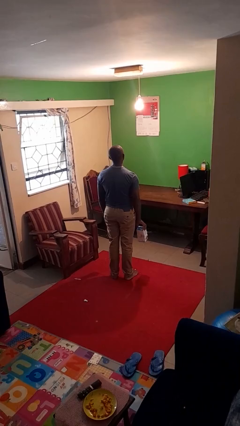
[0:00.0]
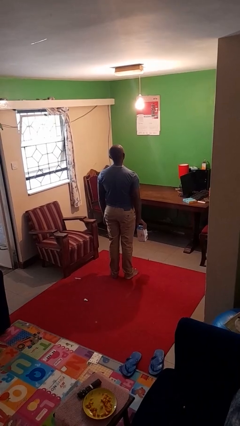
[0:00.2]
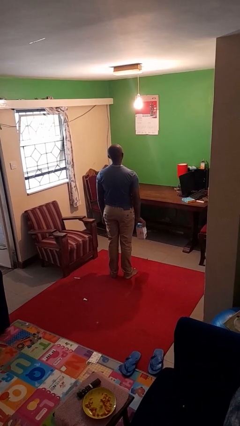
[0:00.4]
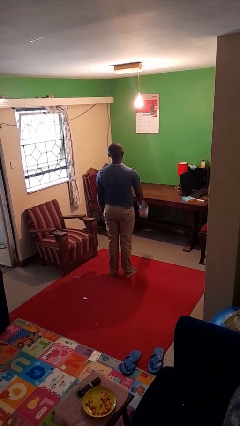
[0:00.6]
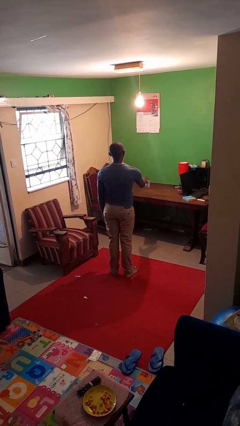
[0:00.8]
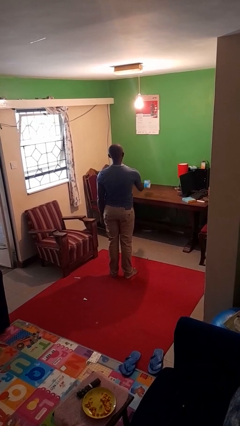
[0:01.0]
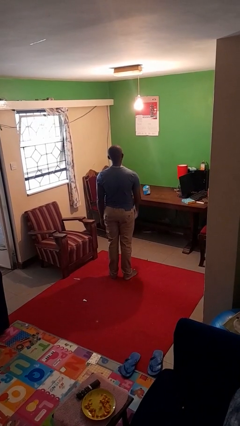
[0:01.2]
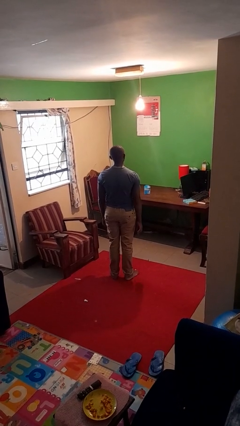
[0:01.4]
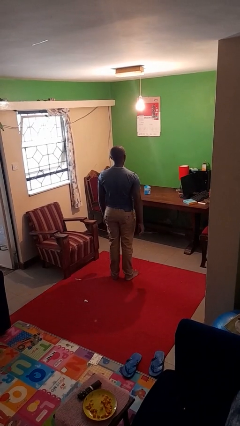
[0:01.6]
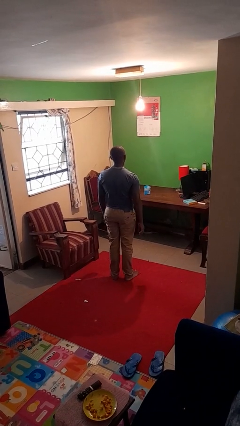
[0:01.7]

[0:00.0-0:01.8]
person throws object on table

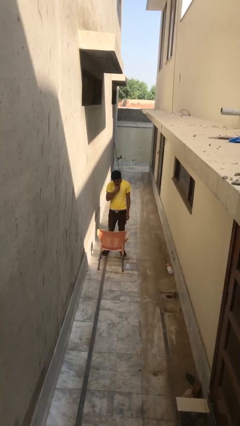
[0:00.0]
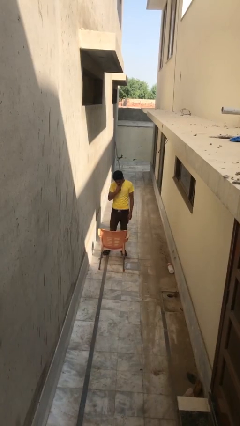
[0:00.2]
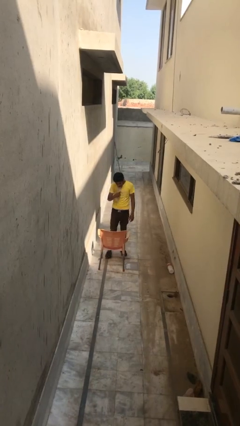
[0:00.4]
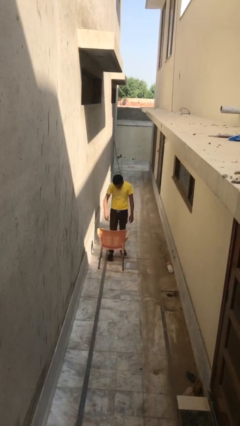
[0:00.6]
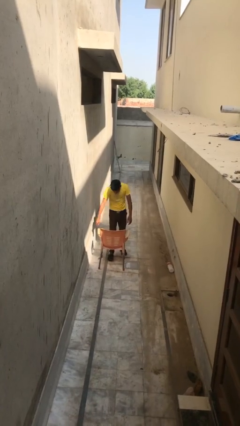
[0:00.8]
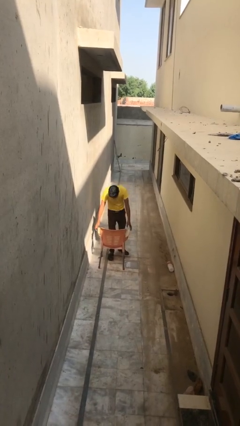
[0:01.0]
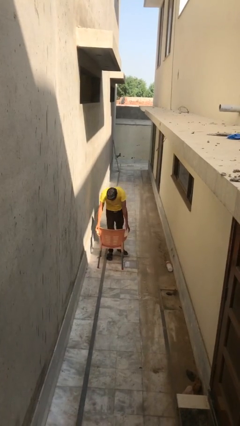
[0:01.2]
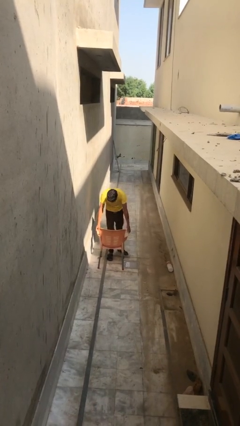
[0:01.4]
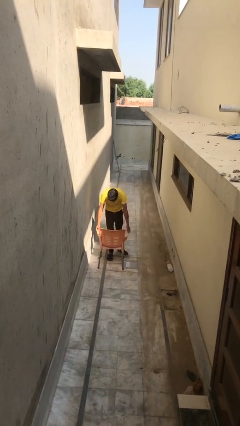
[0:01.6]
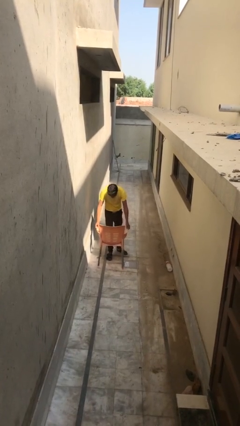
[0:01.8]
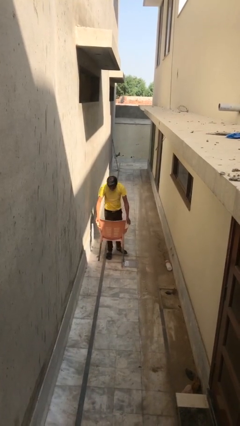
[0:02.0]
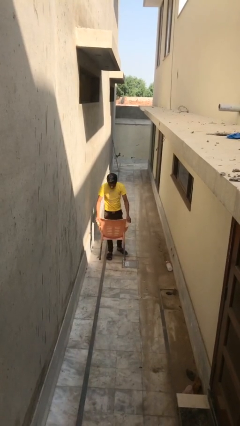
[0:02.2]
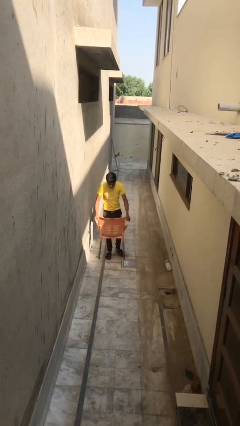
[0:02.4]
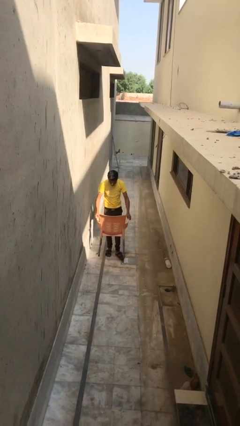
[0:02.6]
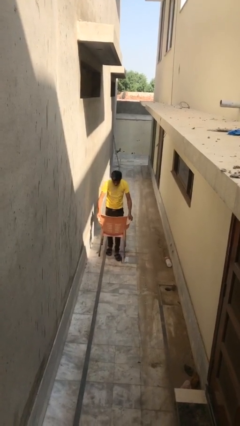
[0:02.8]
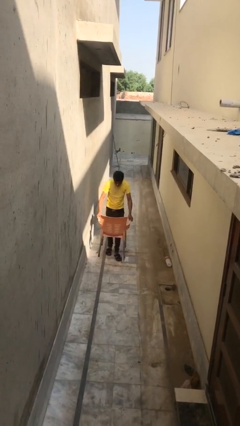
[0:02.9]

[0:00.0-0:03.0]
person picks up object from floor

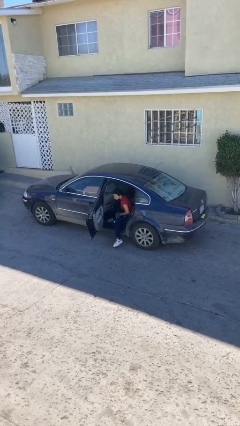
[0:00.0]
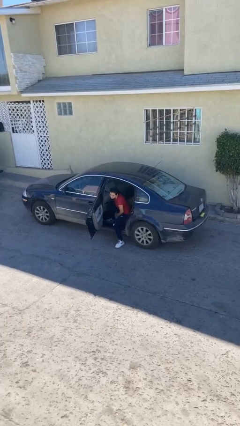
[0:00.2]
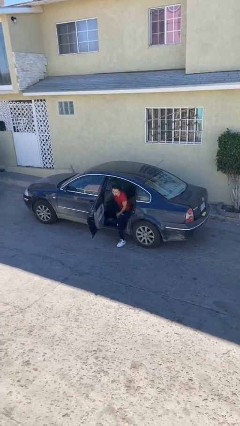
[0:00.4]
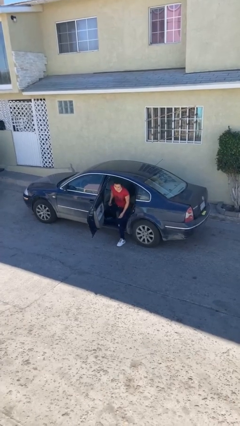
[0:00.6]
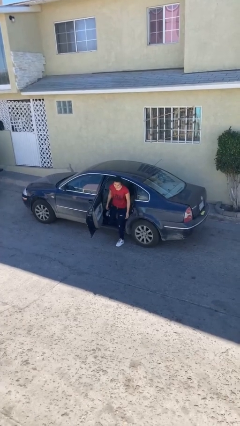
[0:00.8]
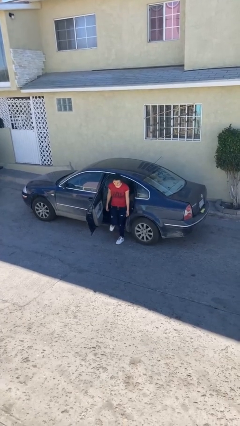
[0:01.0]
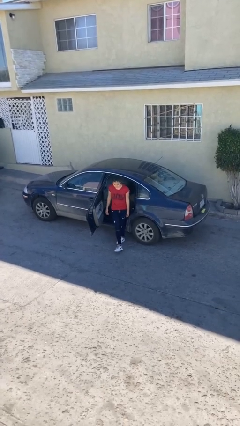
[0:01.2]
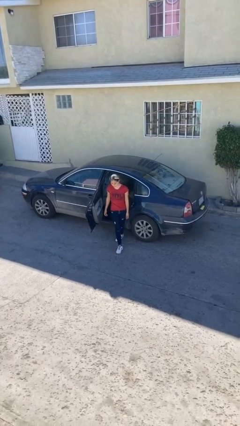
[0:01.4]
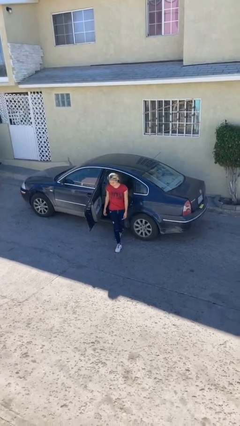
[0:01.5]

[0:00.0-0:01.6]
person exits car

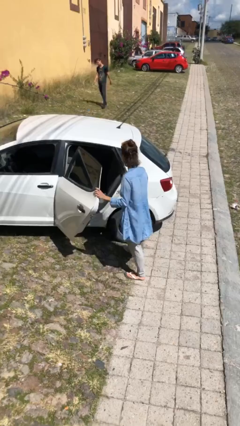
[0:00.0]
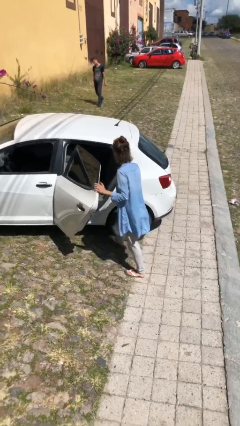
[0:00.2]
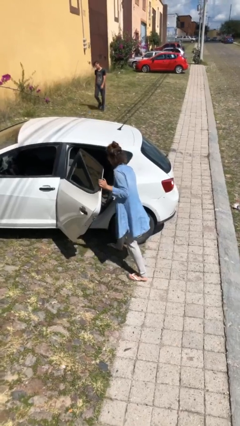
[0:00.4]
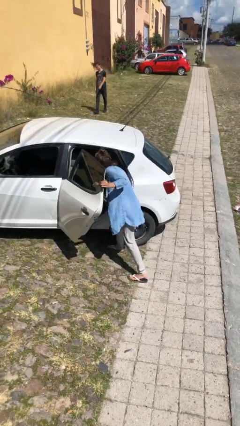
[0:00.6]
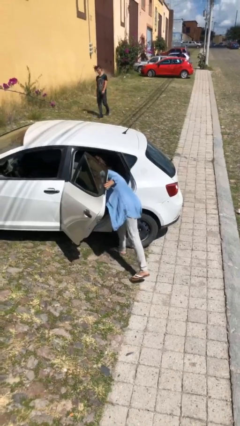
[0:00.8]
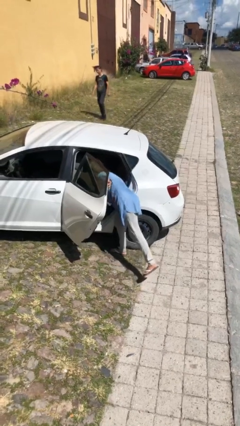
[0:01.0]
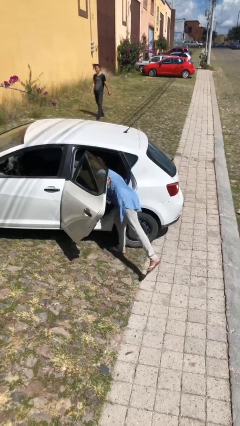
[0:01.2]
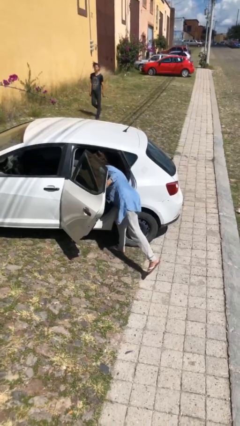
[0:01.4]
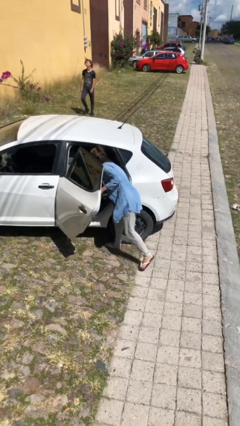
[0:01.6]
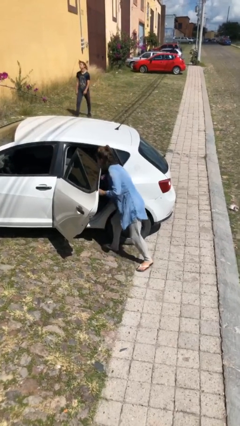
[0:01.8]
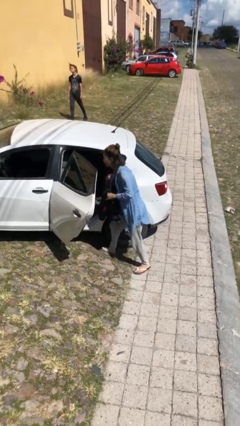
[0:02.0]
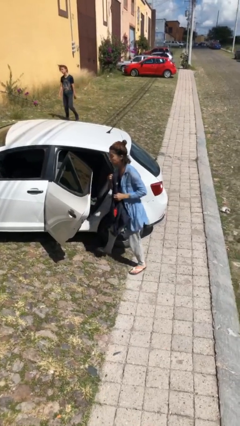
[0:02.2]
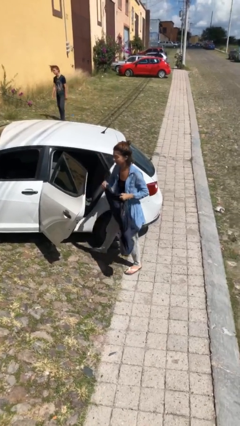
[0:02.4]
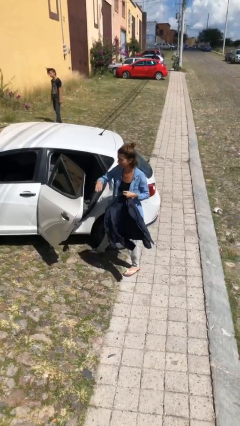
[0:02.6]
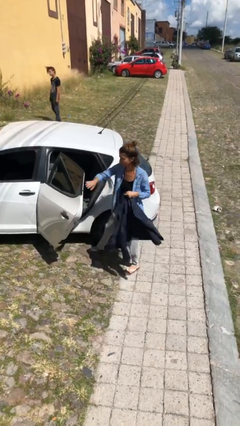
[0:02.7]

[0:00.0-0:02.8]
person unloads car

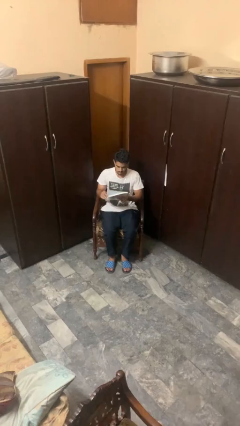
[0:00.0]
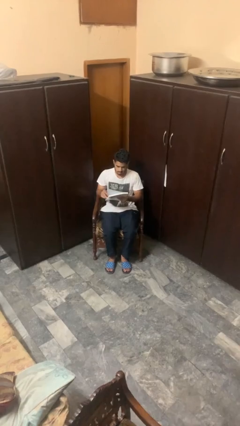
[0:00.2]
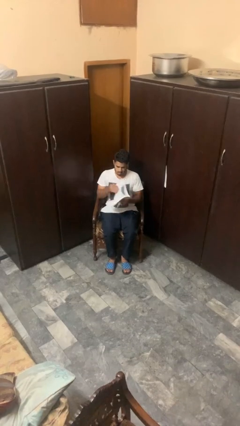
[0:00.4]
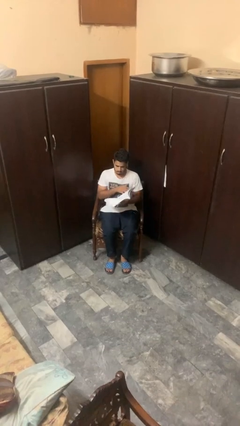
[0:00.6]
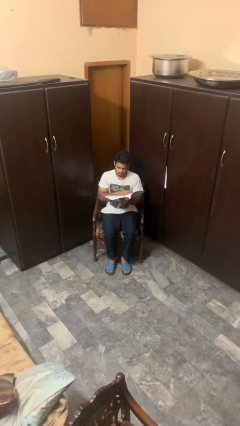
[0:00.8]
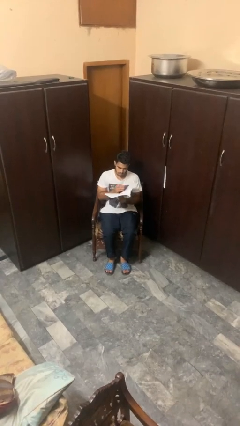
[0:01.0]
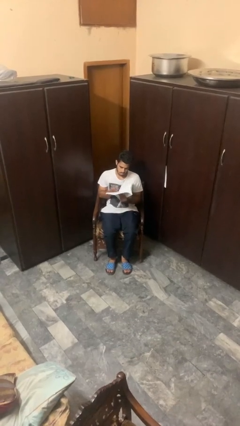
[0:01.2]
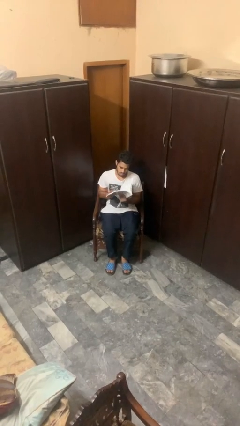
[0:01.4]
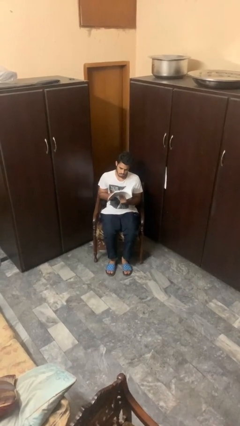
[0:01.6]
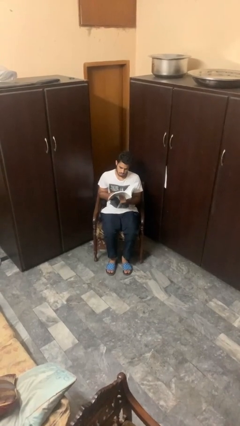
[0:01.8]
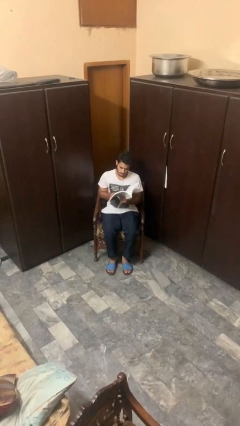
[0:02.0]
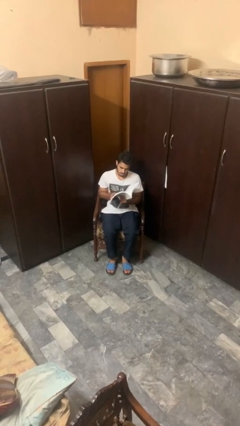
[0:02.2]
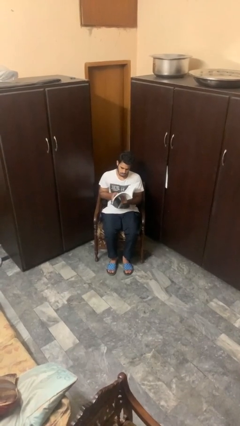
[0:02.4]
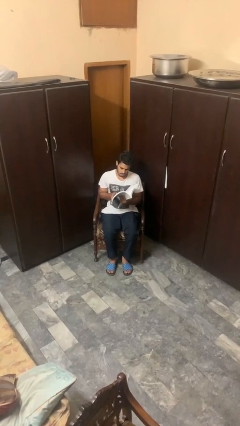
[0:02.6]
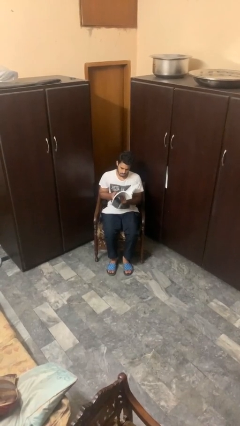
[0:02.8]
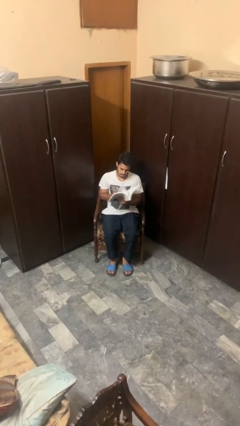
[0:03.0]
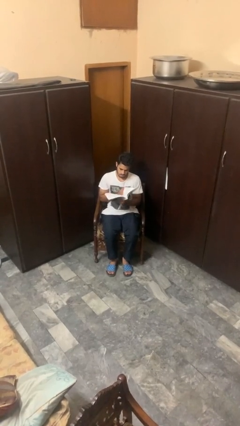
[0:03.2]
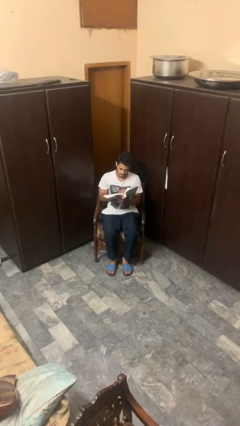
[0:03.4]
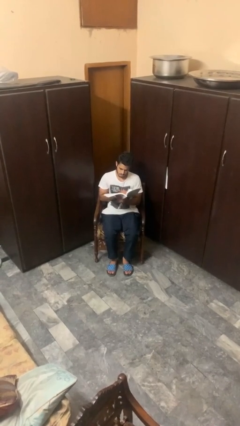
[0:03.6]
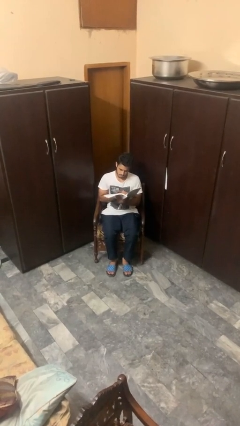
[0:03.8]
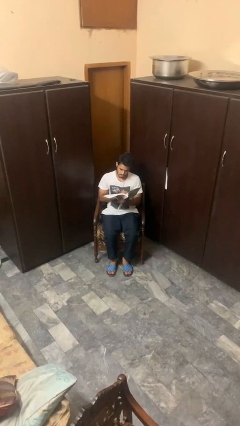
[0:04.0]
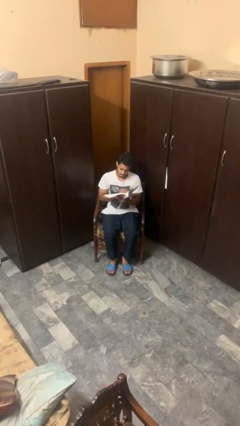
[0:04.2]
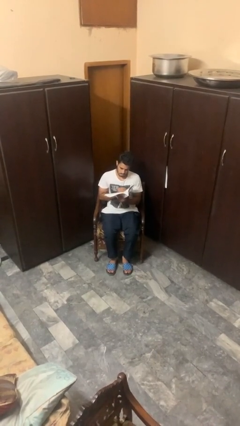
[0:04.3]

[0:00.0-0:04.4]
person reads book

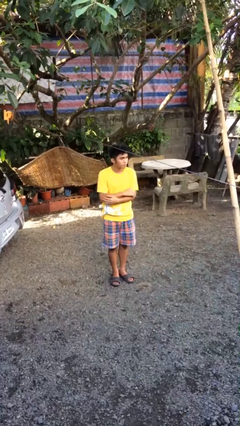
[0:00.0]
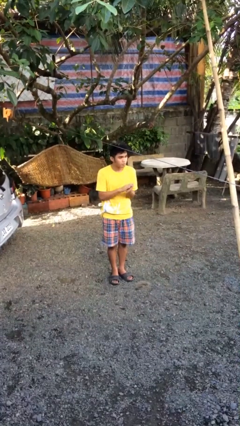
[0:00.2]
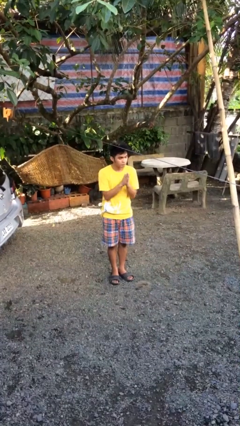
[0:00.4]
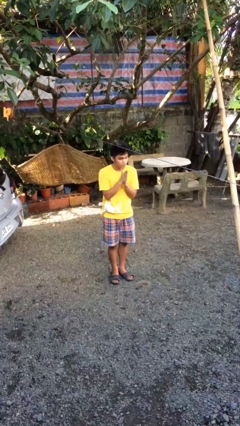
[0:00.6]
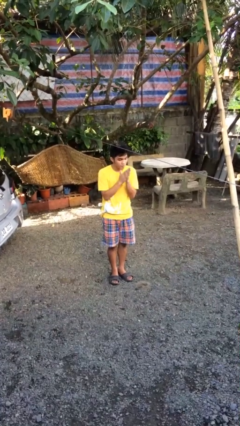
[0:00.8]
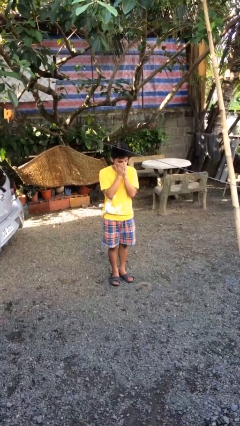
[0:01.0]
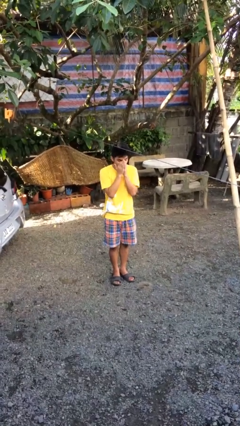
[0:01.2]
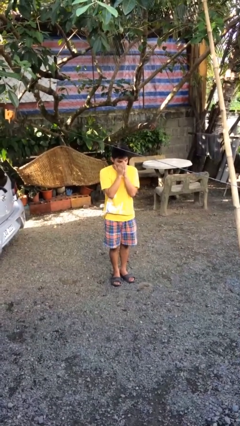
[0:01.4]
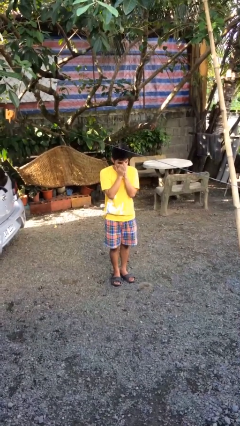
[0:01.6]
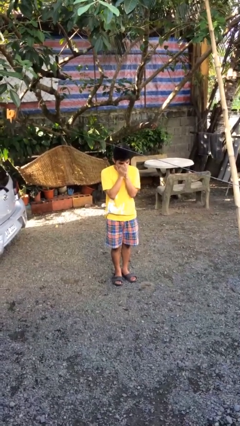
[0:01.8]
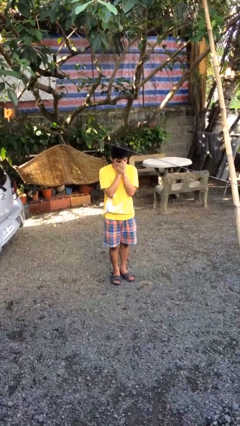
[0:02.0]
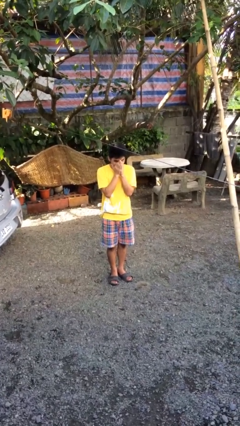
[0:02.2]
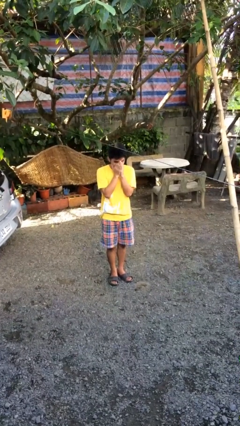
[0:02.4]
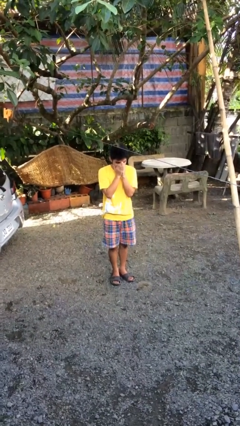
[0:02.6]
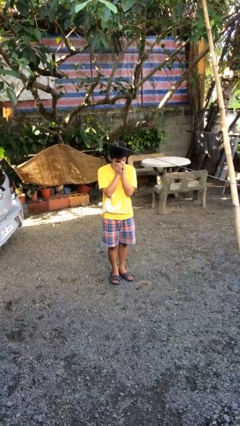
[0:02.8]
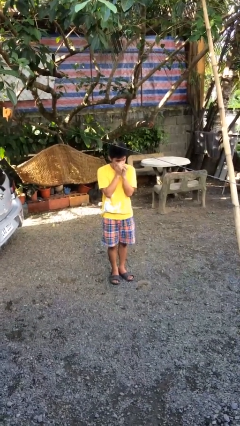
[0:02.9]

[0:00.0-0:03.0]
person blows into hands

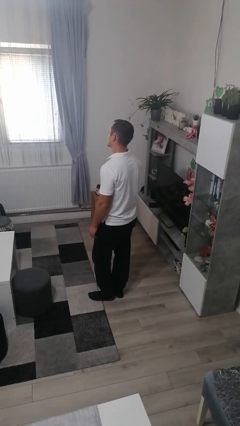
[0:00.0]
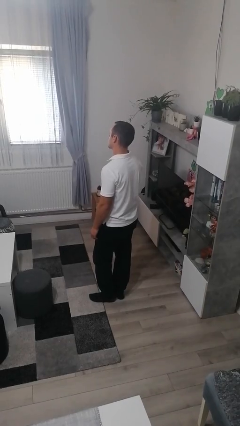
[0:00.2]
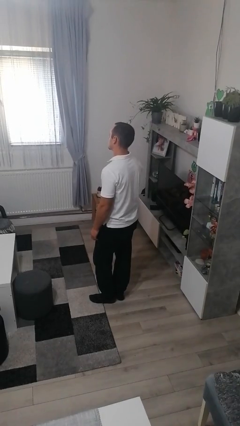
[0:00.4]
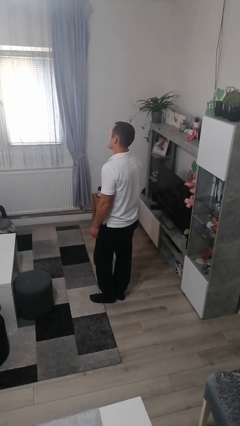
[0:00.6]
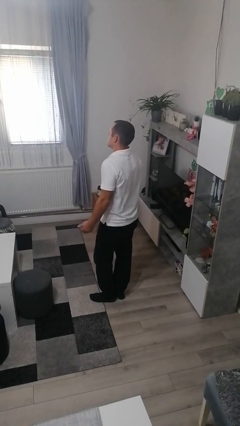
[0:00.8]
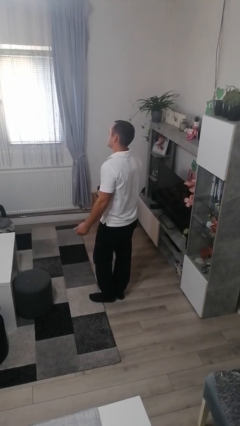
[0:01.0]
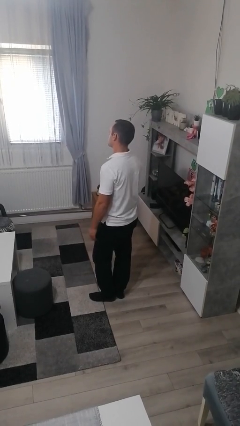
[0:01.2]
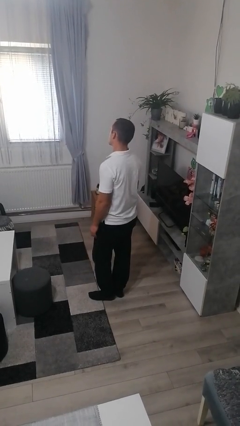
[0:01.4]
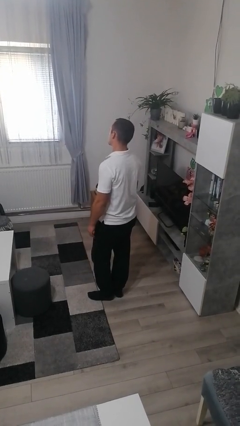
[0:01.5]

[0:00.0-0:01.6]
person shrugs
